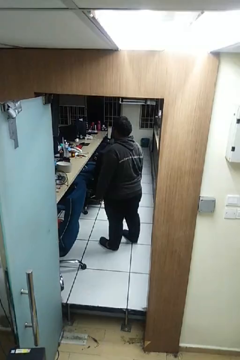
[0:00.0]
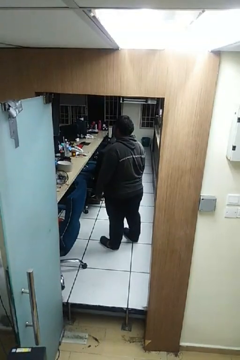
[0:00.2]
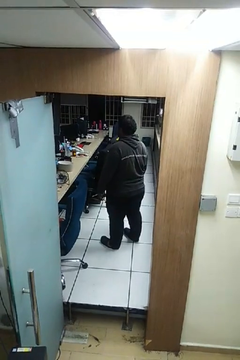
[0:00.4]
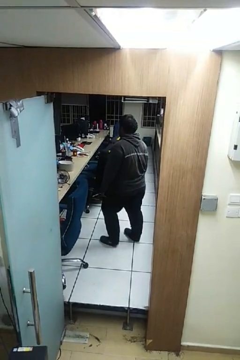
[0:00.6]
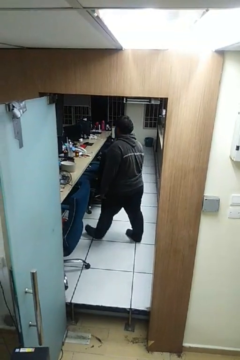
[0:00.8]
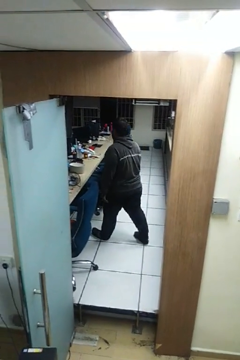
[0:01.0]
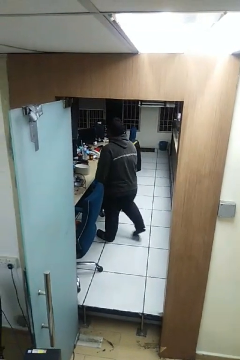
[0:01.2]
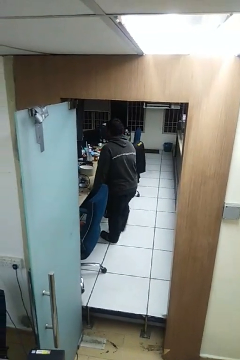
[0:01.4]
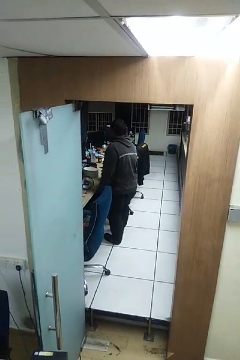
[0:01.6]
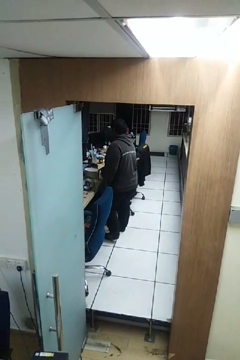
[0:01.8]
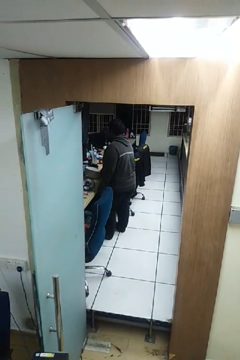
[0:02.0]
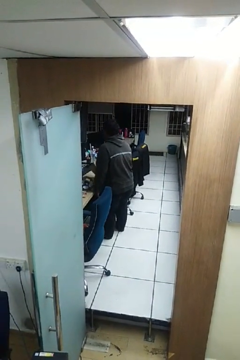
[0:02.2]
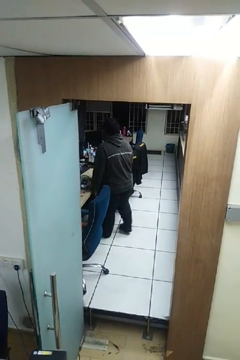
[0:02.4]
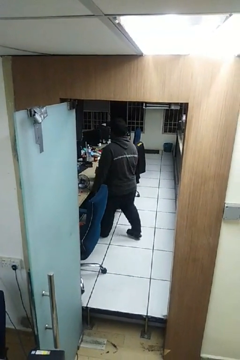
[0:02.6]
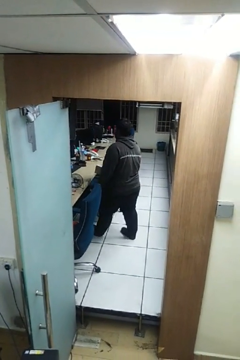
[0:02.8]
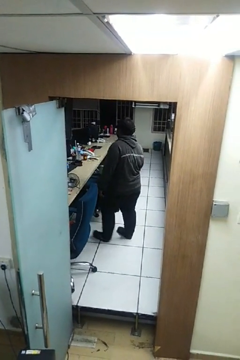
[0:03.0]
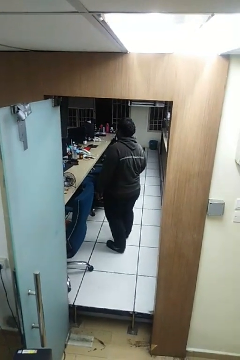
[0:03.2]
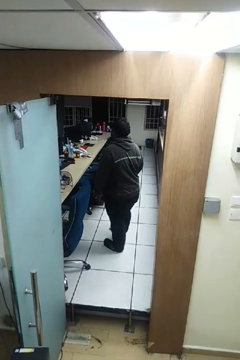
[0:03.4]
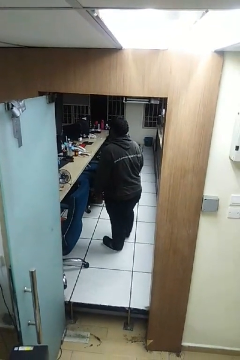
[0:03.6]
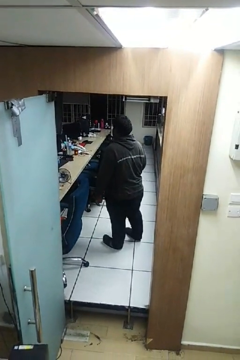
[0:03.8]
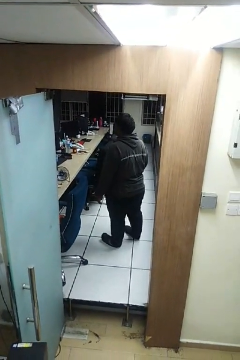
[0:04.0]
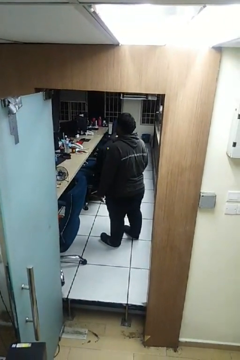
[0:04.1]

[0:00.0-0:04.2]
person picks up object from table

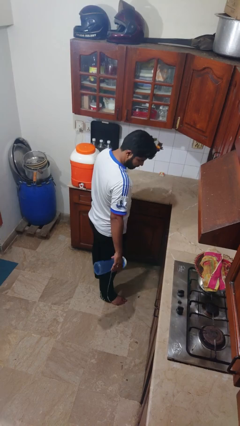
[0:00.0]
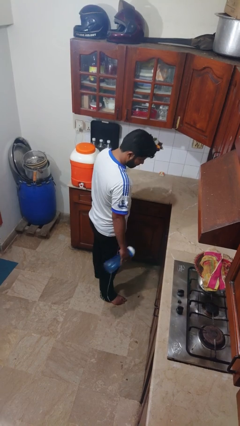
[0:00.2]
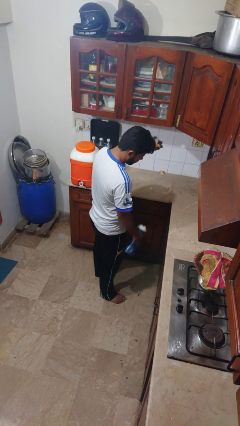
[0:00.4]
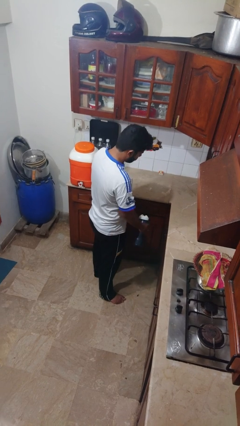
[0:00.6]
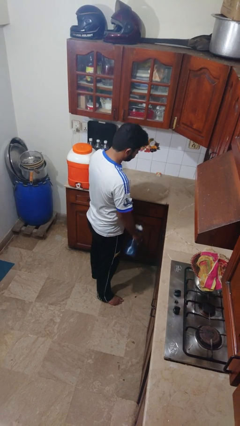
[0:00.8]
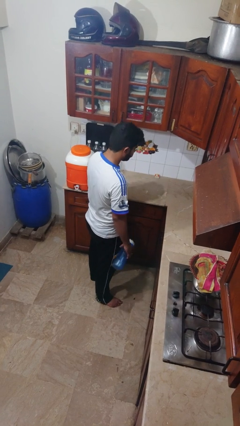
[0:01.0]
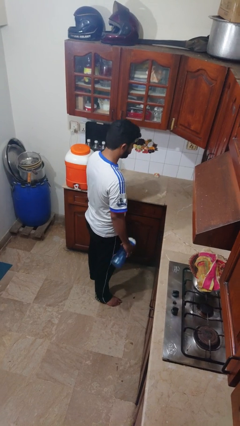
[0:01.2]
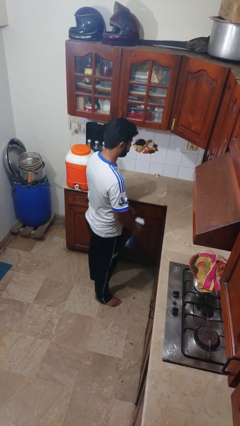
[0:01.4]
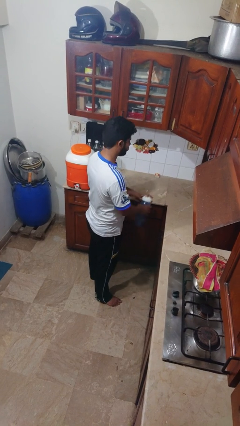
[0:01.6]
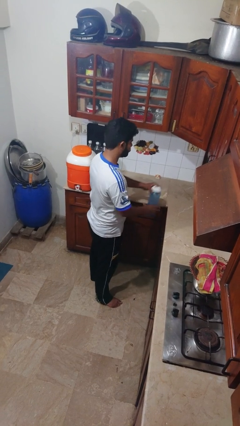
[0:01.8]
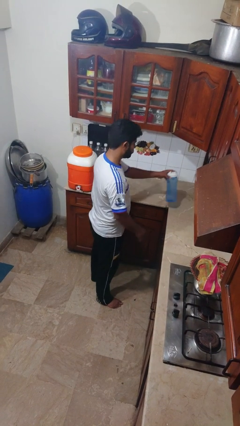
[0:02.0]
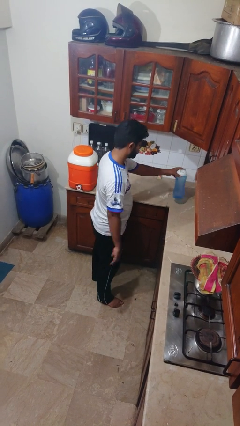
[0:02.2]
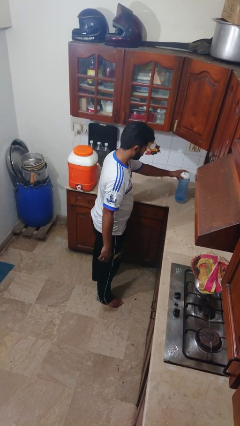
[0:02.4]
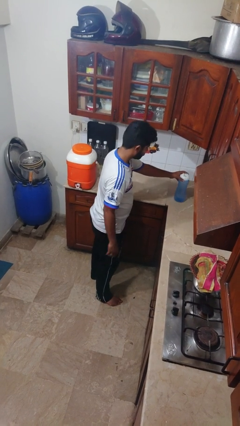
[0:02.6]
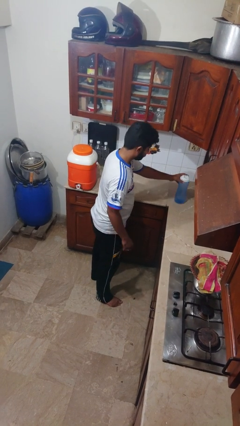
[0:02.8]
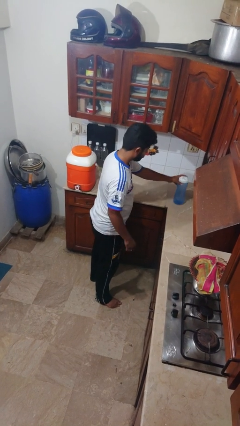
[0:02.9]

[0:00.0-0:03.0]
person puts down object on countertop

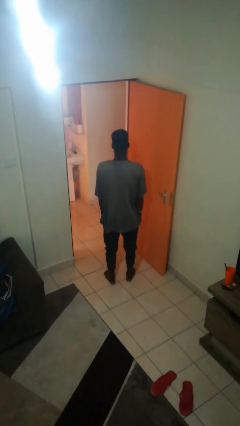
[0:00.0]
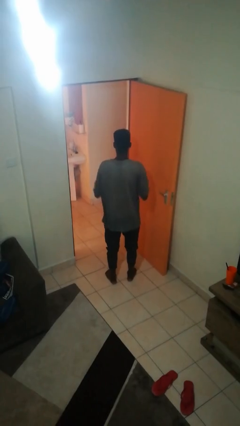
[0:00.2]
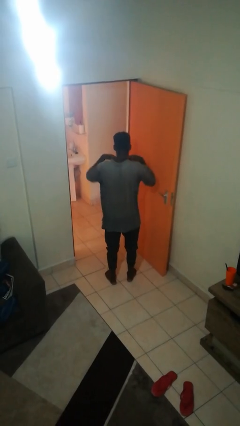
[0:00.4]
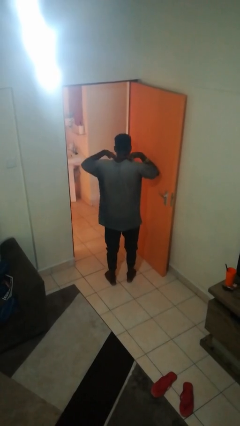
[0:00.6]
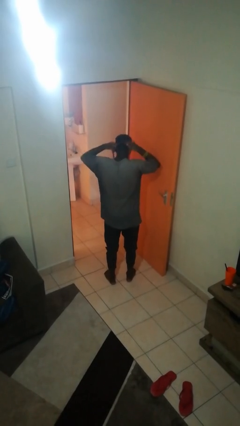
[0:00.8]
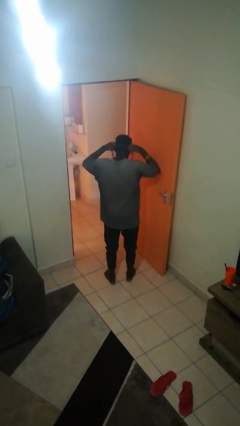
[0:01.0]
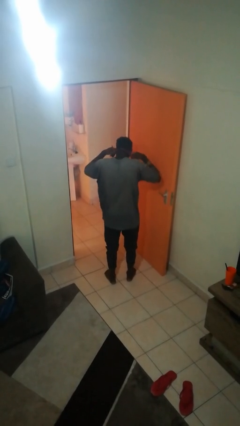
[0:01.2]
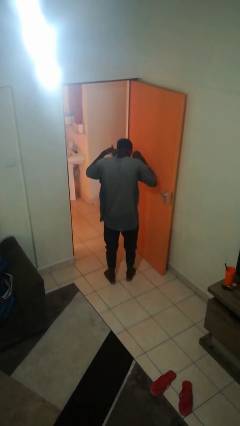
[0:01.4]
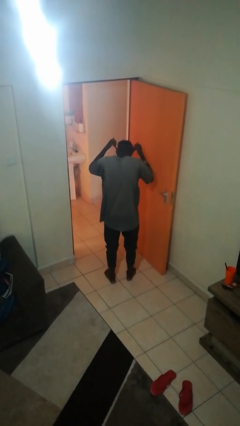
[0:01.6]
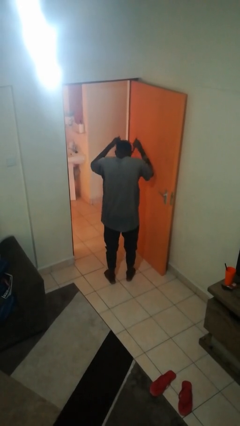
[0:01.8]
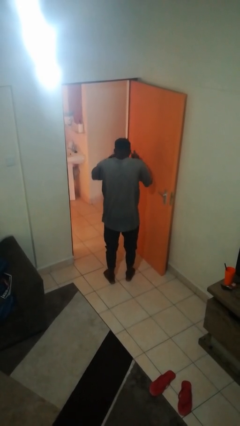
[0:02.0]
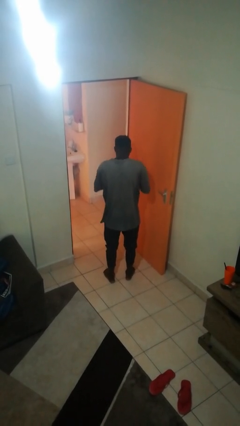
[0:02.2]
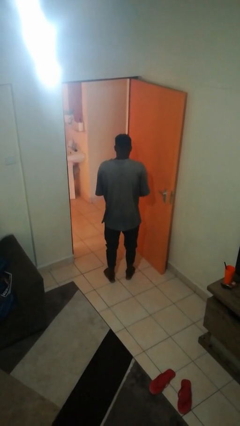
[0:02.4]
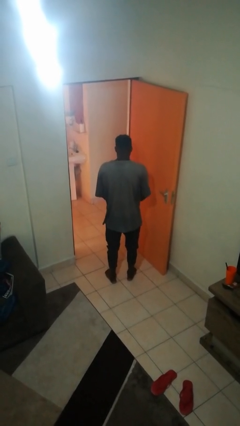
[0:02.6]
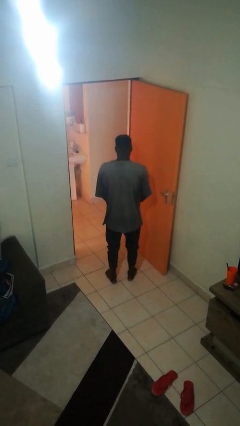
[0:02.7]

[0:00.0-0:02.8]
person takes off necklace

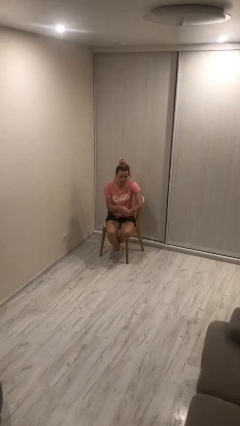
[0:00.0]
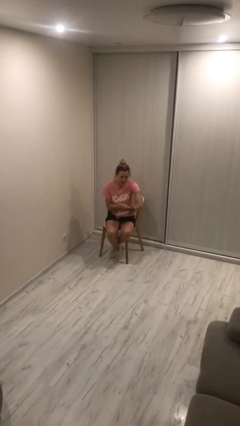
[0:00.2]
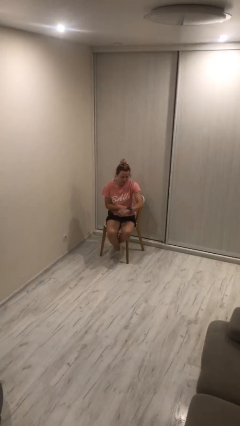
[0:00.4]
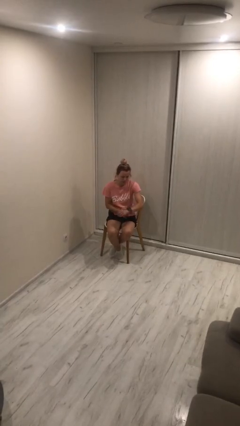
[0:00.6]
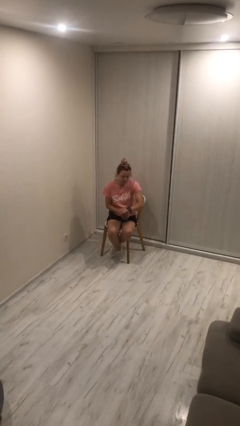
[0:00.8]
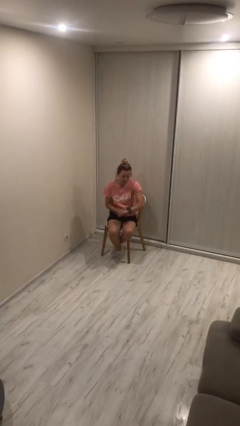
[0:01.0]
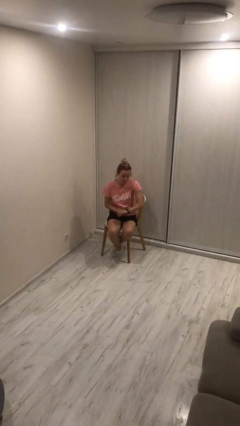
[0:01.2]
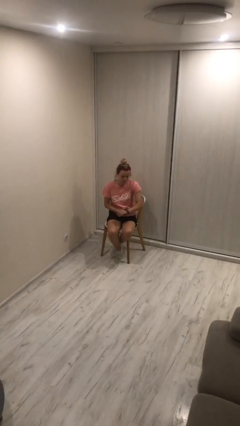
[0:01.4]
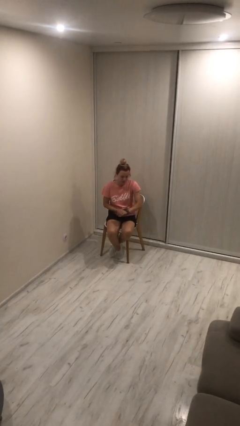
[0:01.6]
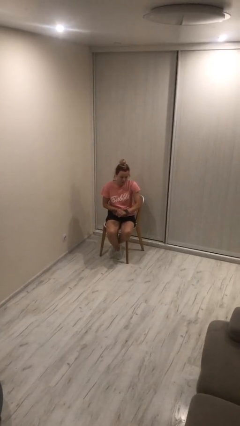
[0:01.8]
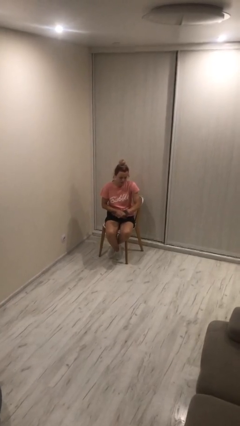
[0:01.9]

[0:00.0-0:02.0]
person puts on wristwatch

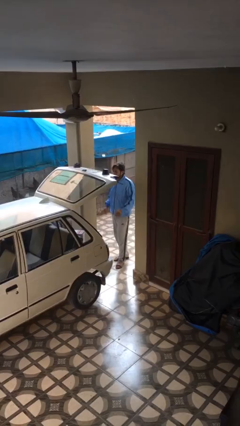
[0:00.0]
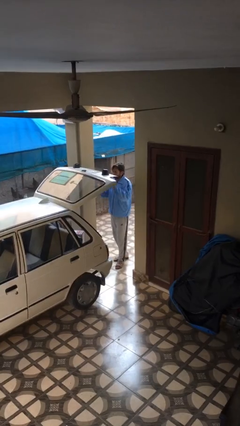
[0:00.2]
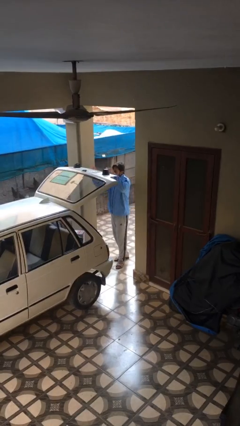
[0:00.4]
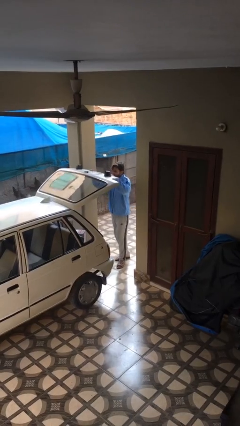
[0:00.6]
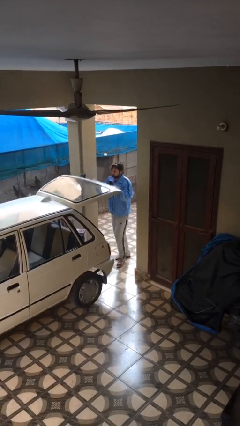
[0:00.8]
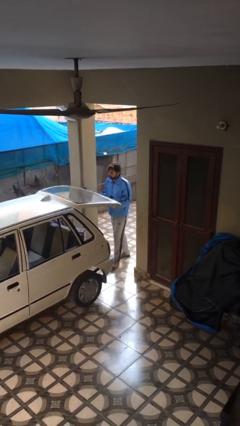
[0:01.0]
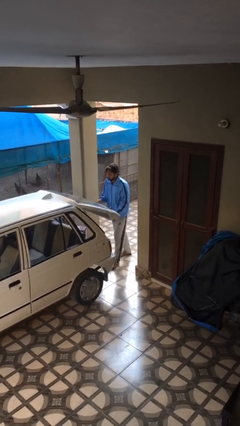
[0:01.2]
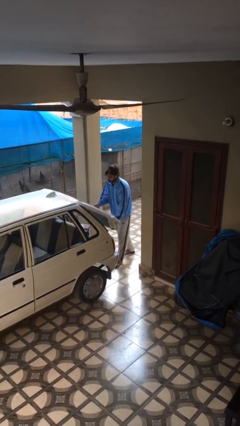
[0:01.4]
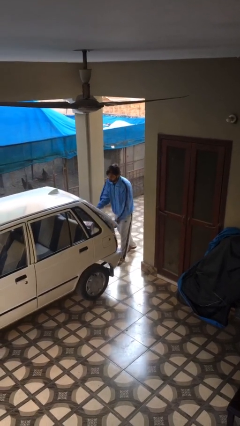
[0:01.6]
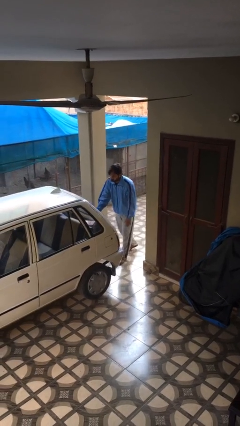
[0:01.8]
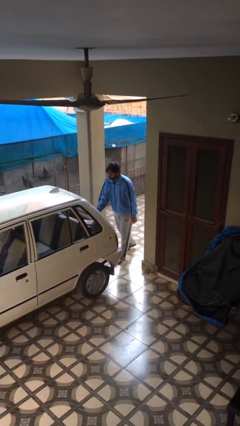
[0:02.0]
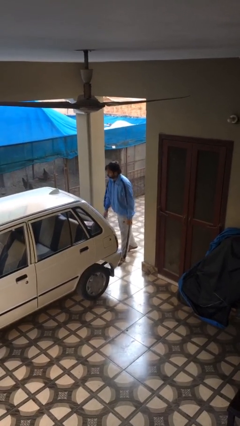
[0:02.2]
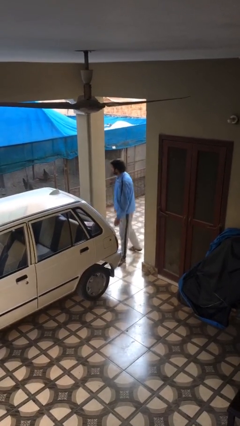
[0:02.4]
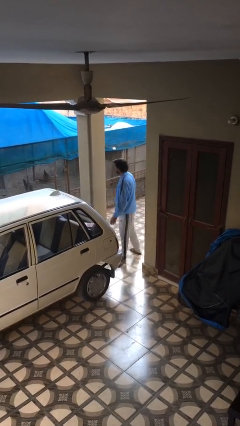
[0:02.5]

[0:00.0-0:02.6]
person closes car trunk

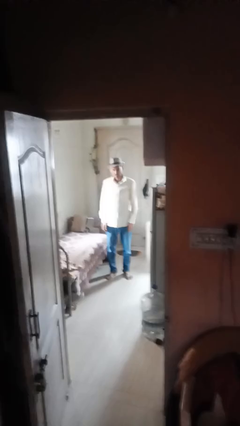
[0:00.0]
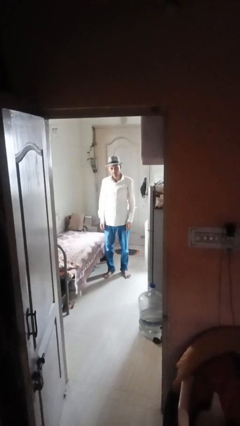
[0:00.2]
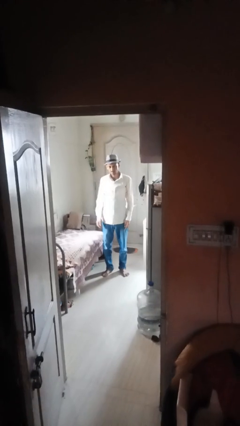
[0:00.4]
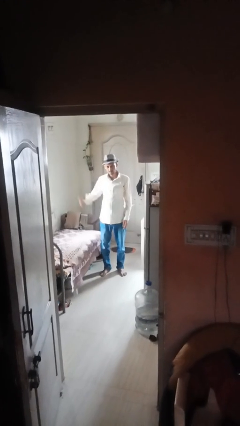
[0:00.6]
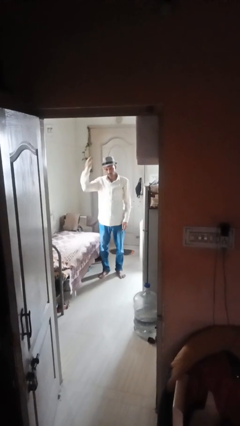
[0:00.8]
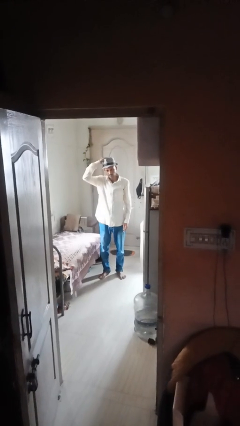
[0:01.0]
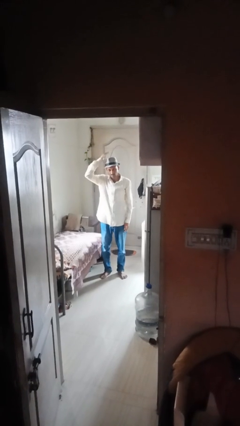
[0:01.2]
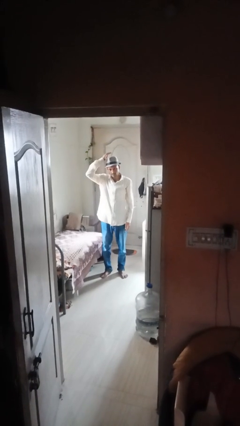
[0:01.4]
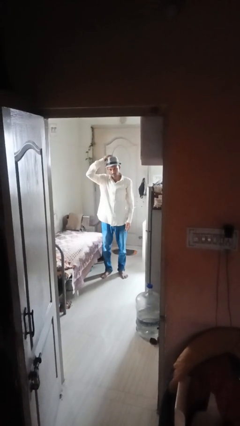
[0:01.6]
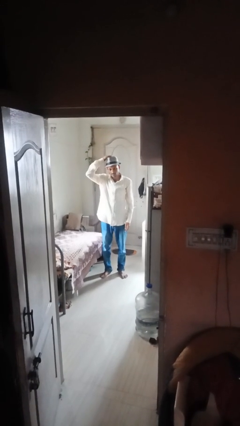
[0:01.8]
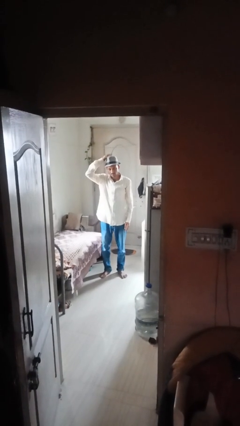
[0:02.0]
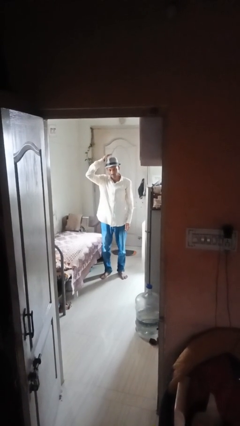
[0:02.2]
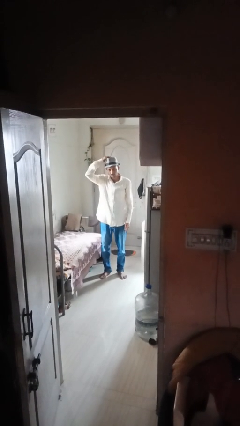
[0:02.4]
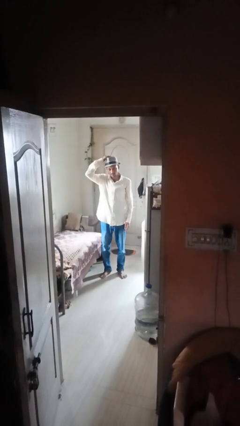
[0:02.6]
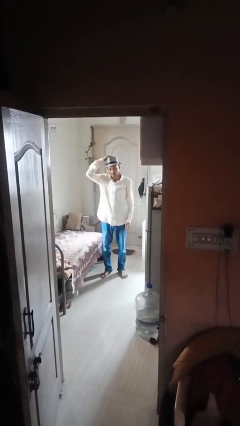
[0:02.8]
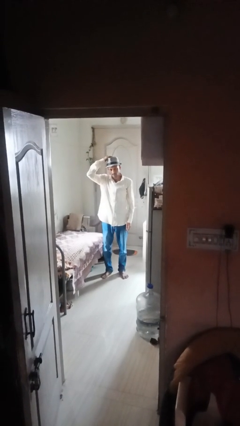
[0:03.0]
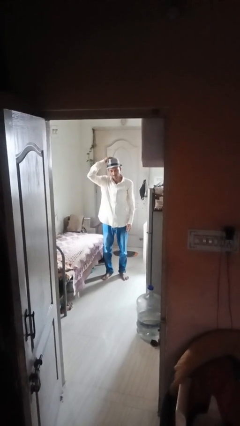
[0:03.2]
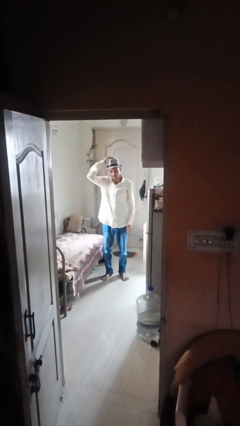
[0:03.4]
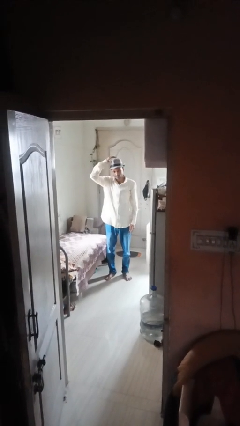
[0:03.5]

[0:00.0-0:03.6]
person pats head
